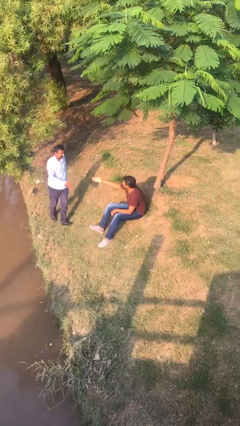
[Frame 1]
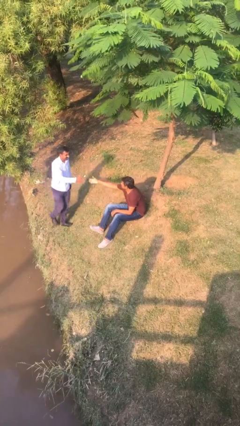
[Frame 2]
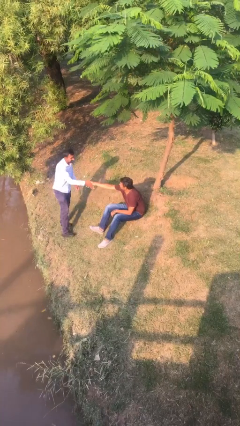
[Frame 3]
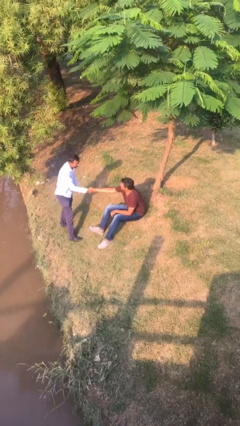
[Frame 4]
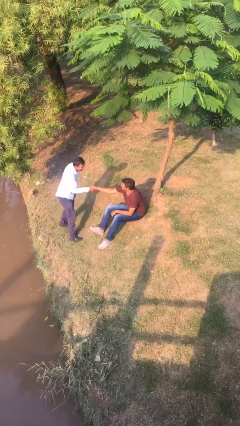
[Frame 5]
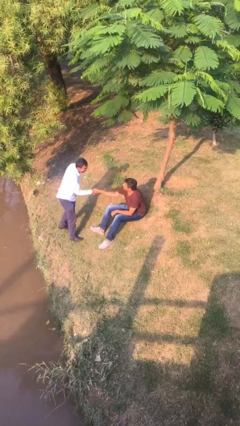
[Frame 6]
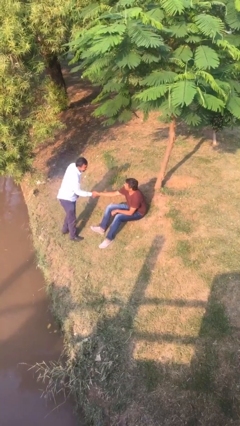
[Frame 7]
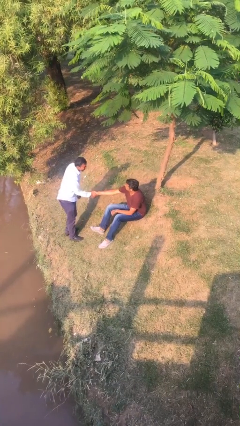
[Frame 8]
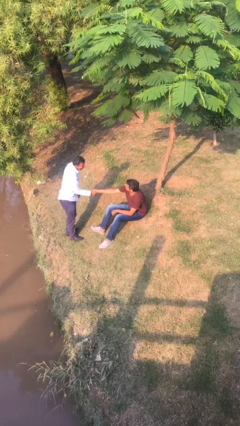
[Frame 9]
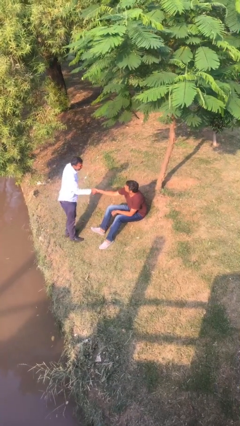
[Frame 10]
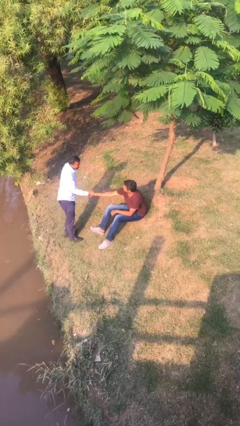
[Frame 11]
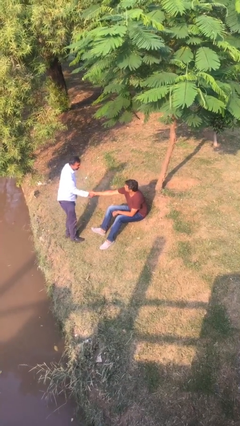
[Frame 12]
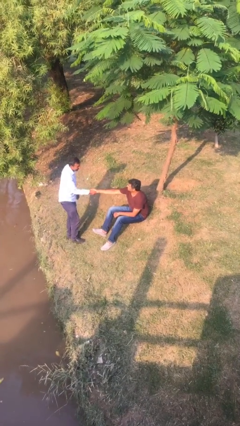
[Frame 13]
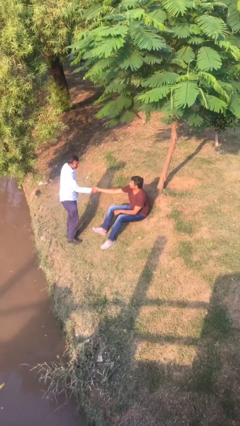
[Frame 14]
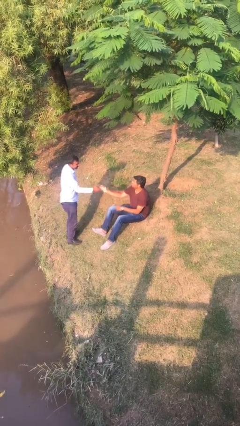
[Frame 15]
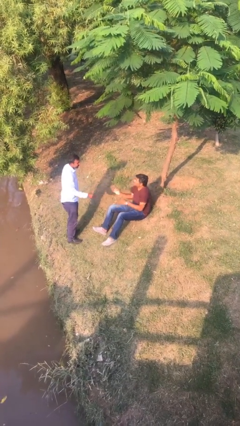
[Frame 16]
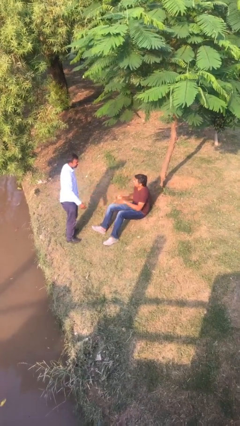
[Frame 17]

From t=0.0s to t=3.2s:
person shakes hand

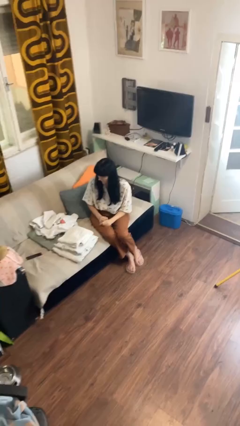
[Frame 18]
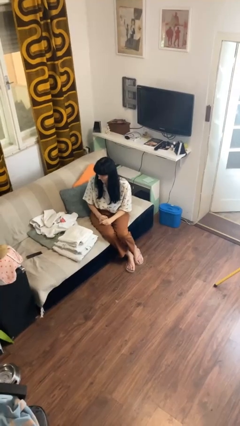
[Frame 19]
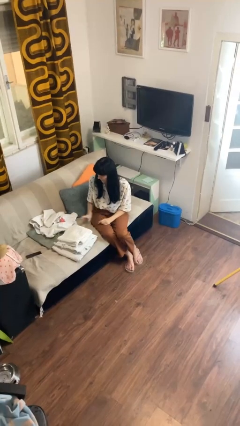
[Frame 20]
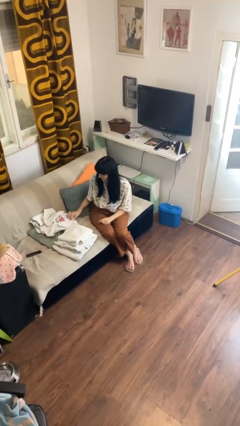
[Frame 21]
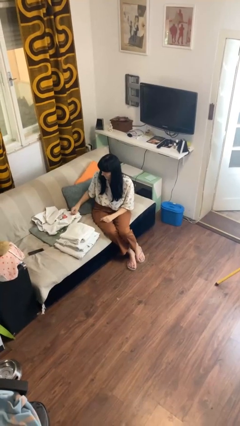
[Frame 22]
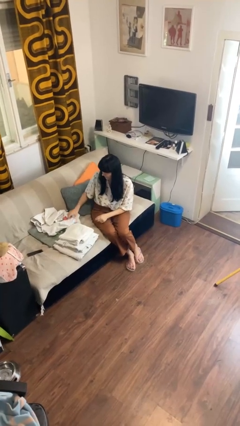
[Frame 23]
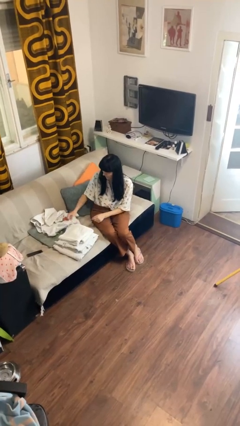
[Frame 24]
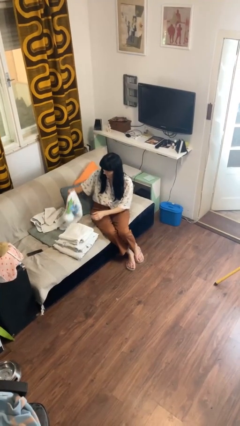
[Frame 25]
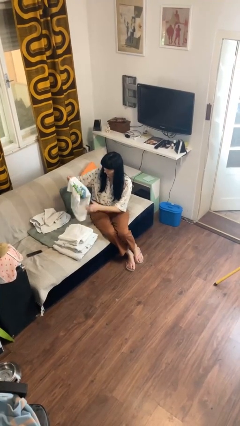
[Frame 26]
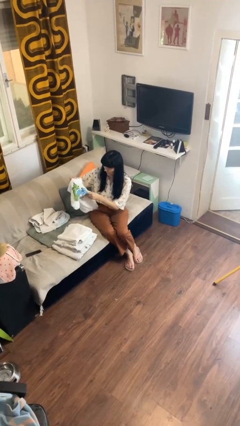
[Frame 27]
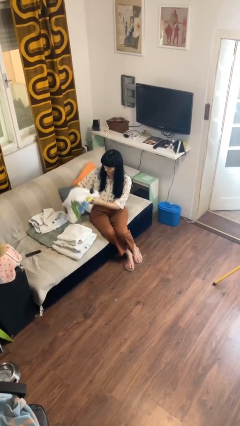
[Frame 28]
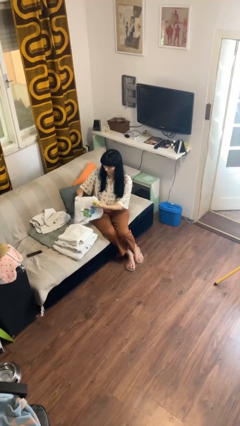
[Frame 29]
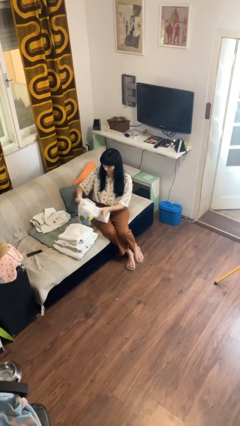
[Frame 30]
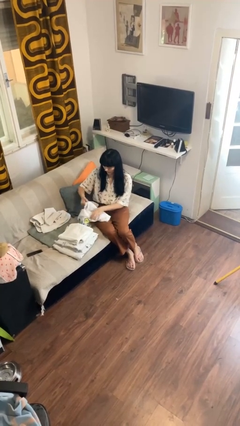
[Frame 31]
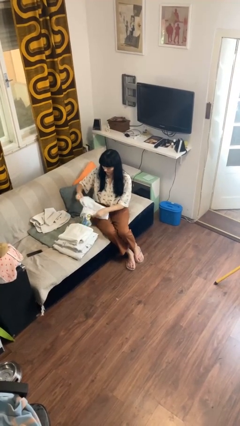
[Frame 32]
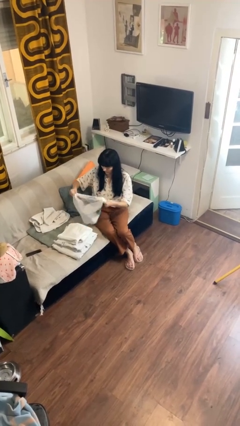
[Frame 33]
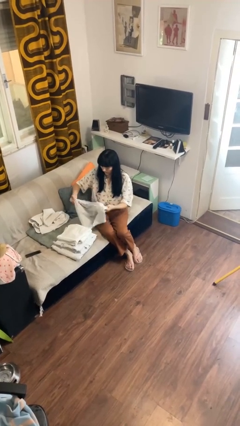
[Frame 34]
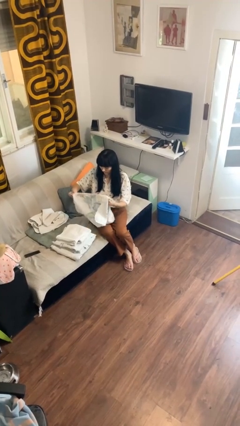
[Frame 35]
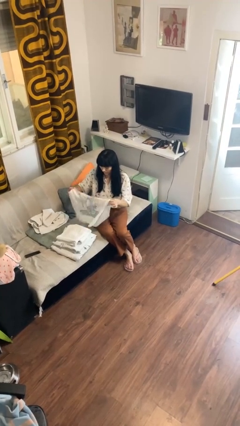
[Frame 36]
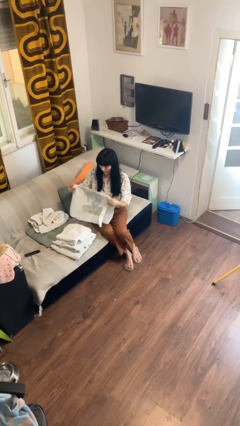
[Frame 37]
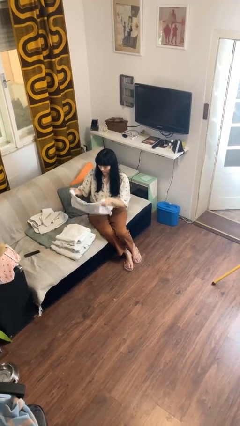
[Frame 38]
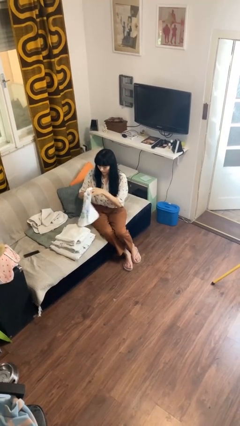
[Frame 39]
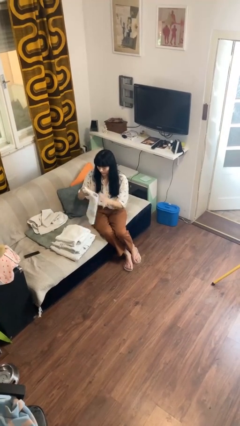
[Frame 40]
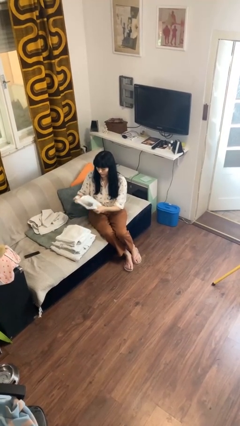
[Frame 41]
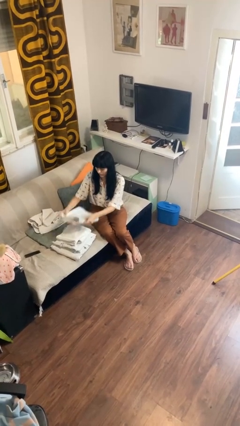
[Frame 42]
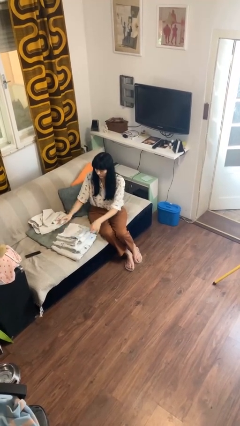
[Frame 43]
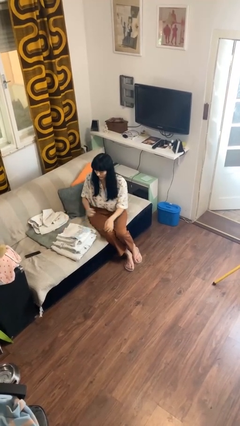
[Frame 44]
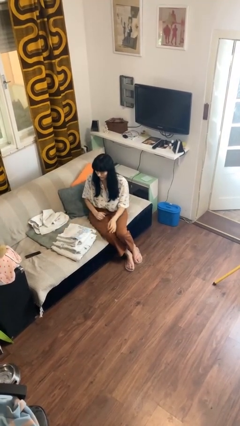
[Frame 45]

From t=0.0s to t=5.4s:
person folds towel

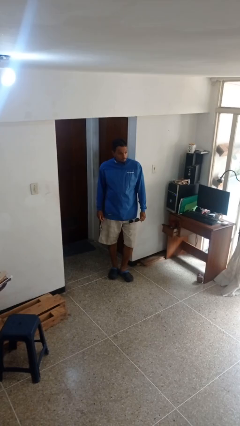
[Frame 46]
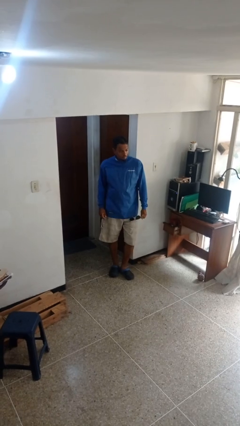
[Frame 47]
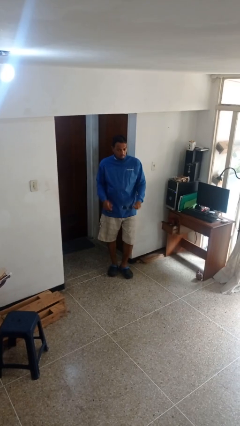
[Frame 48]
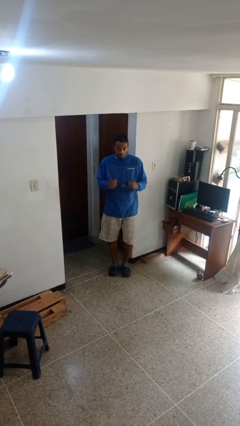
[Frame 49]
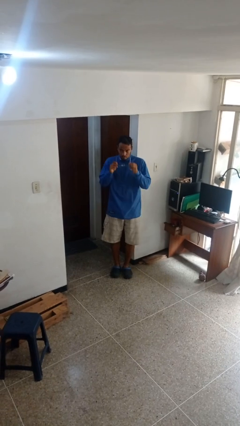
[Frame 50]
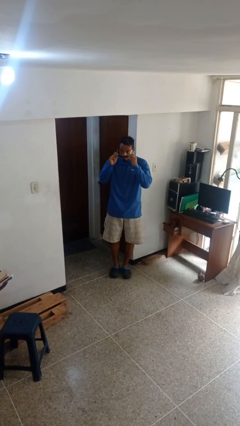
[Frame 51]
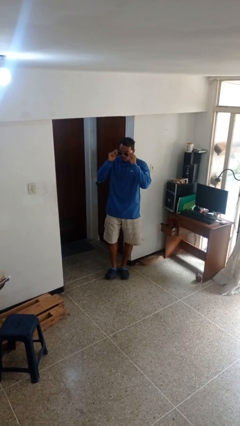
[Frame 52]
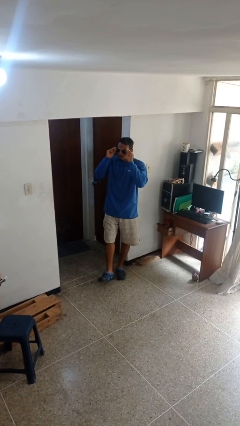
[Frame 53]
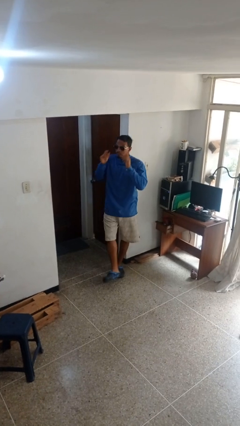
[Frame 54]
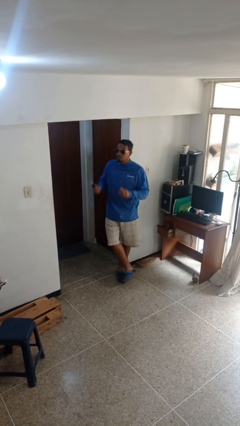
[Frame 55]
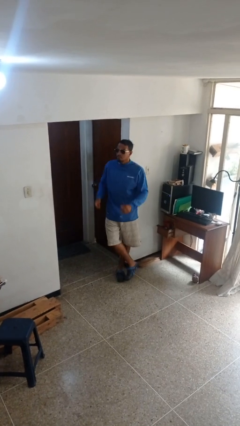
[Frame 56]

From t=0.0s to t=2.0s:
person puts on sunglasses

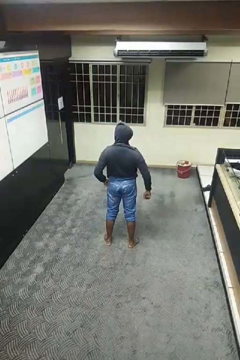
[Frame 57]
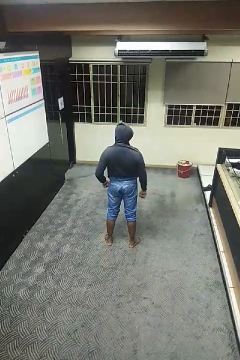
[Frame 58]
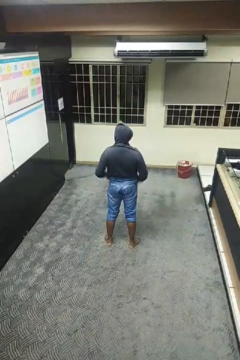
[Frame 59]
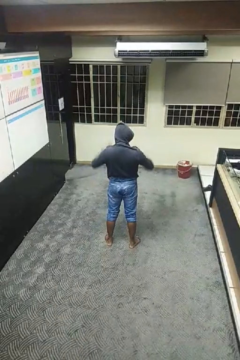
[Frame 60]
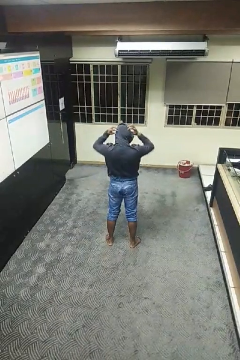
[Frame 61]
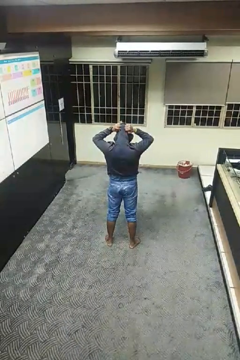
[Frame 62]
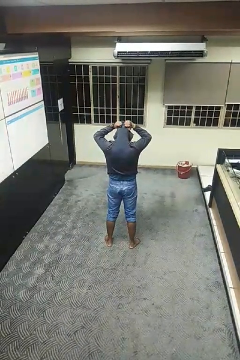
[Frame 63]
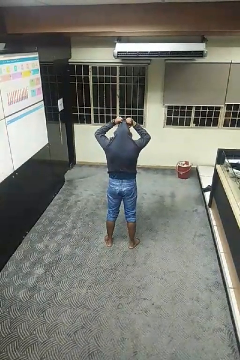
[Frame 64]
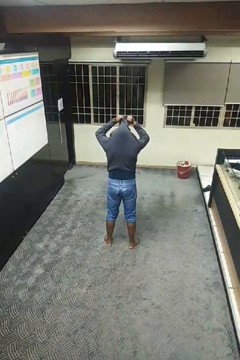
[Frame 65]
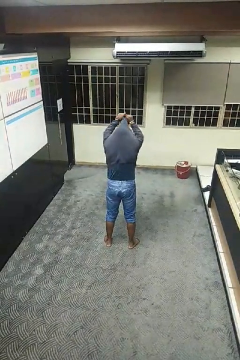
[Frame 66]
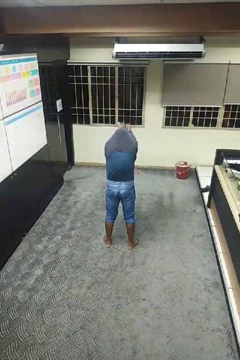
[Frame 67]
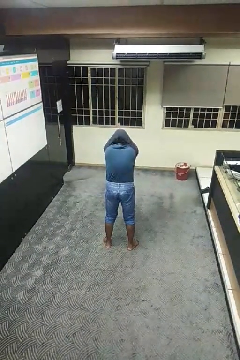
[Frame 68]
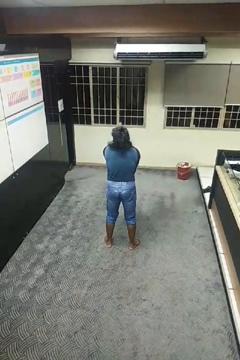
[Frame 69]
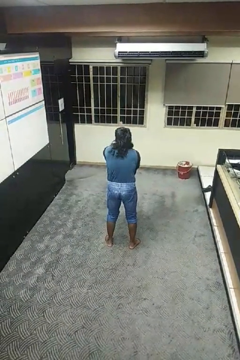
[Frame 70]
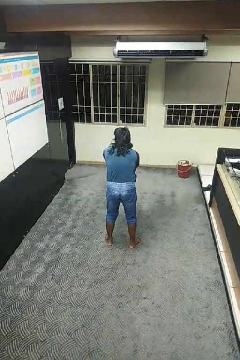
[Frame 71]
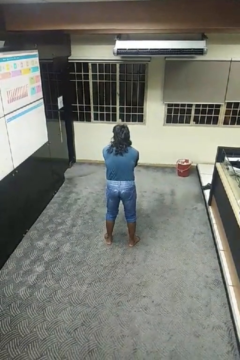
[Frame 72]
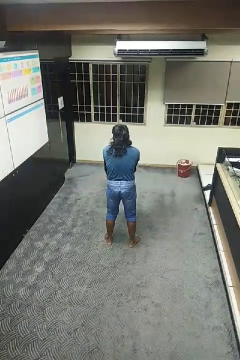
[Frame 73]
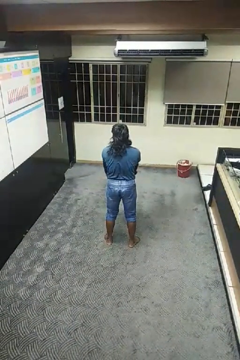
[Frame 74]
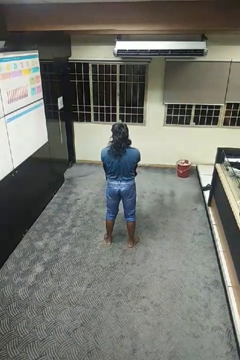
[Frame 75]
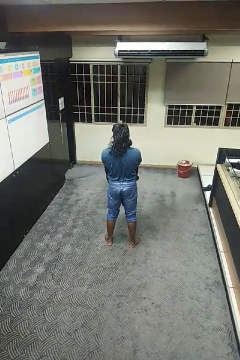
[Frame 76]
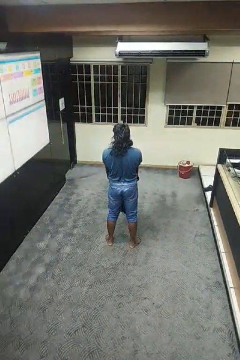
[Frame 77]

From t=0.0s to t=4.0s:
person takes off hoodie

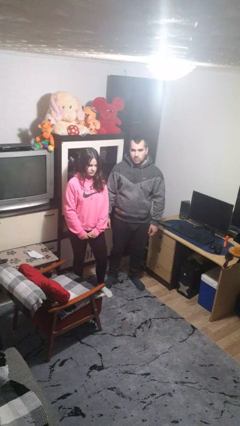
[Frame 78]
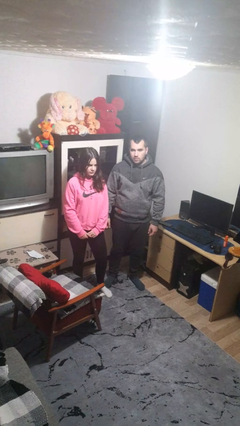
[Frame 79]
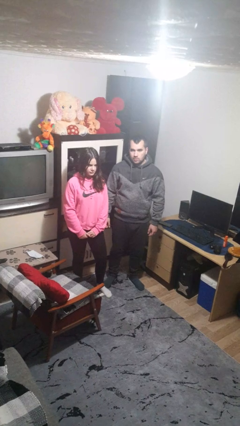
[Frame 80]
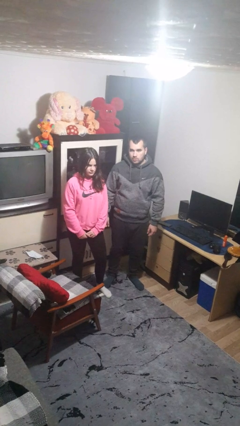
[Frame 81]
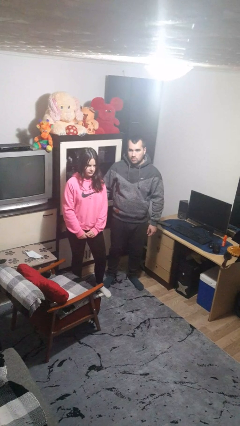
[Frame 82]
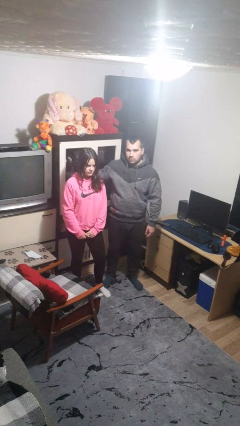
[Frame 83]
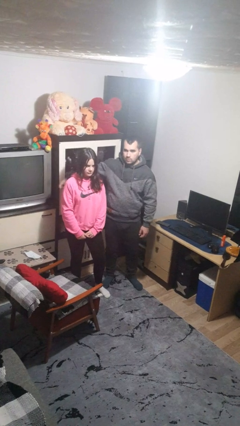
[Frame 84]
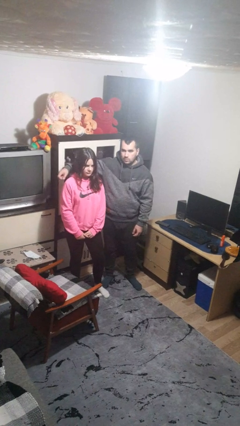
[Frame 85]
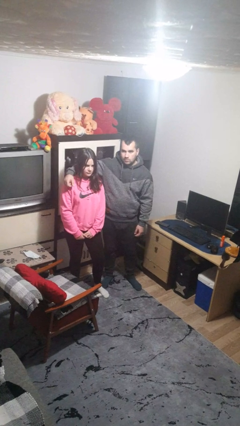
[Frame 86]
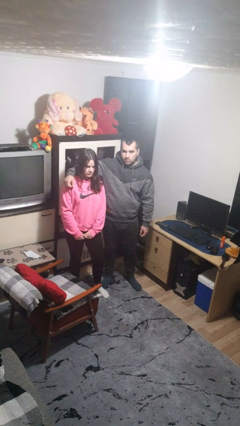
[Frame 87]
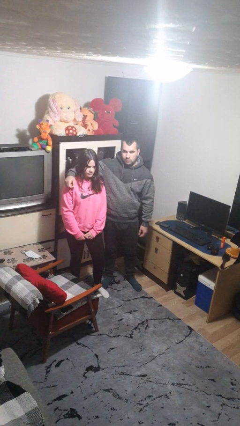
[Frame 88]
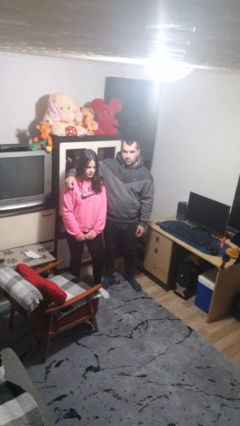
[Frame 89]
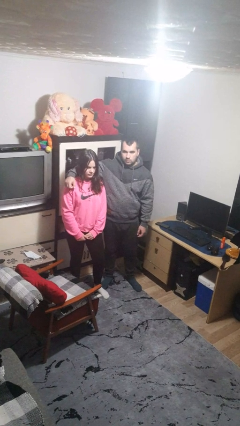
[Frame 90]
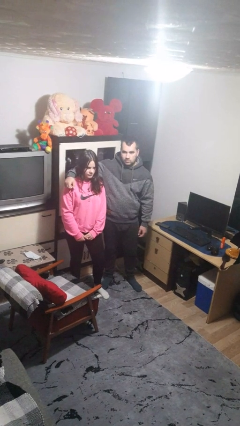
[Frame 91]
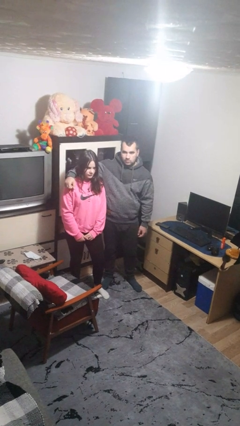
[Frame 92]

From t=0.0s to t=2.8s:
person hugs person from side

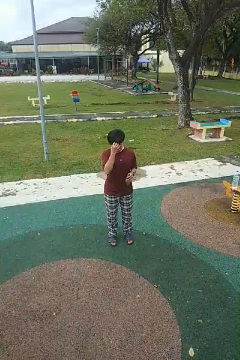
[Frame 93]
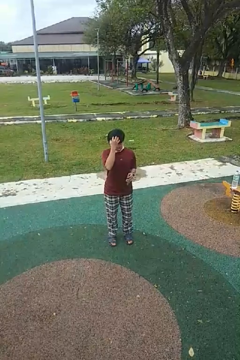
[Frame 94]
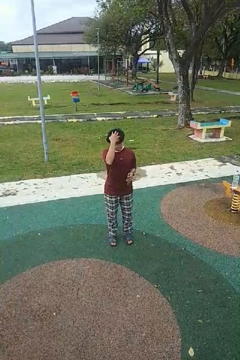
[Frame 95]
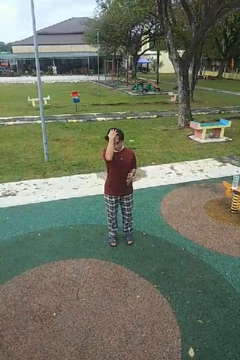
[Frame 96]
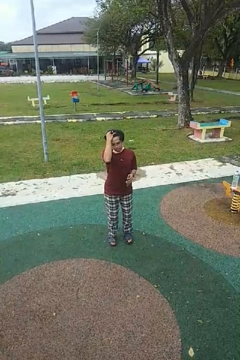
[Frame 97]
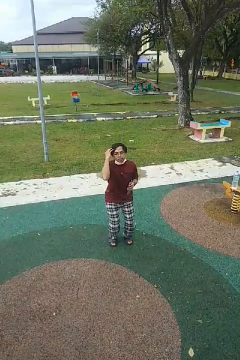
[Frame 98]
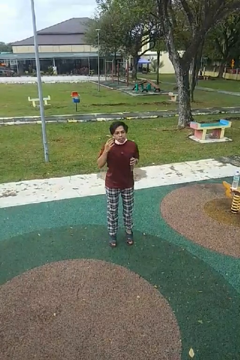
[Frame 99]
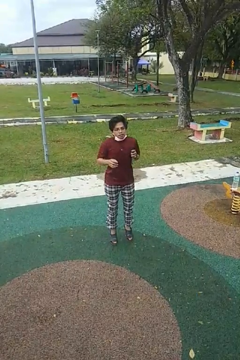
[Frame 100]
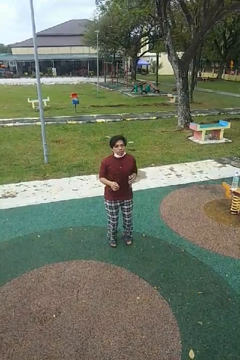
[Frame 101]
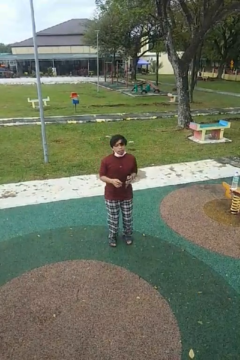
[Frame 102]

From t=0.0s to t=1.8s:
person jumps
